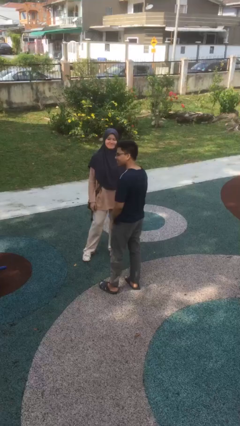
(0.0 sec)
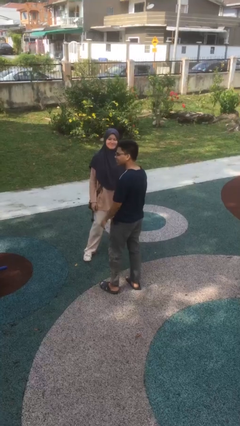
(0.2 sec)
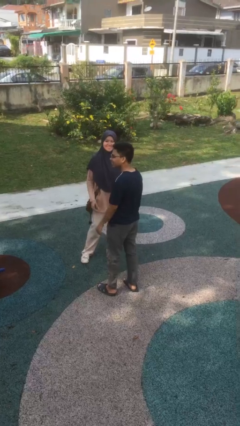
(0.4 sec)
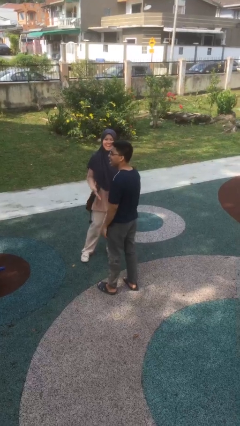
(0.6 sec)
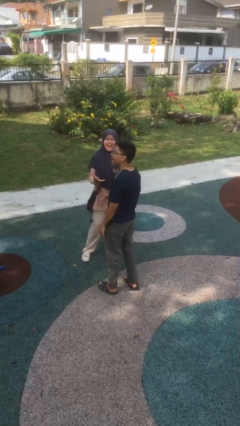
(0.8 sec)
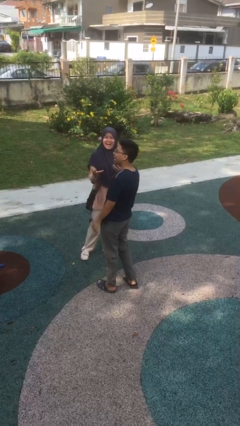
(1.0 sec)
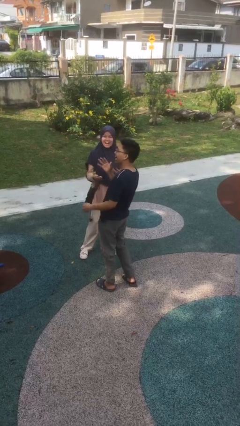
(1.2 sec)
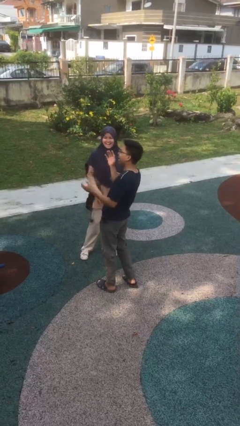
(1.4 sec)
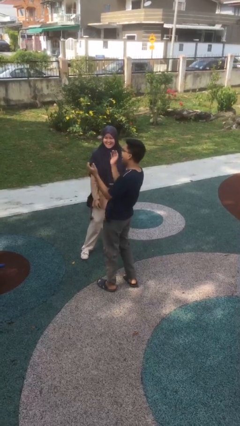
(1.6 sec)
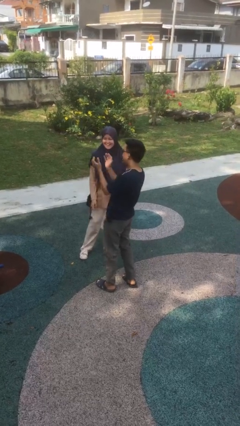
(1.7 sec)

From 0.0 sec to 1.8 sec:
person laughs with person

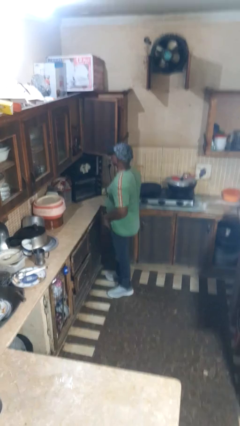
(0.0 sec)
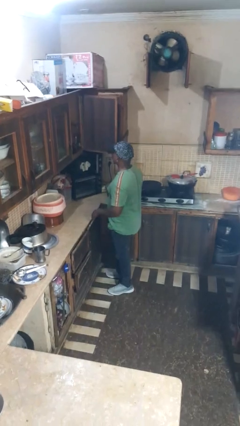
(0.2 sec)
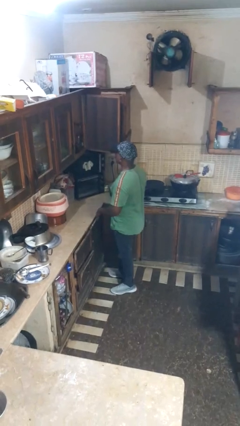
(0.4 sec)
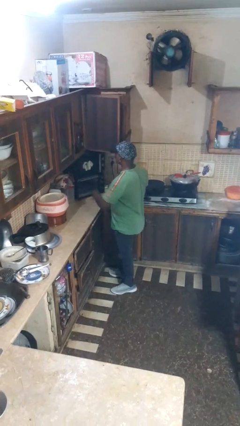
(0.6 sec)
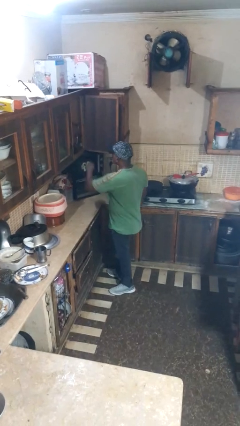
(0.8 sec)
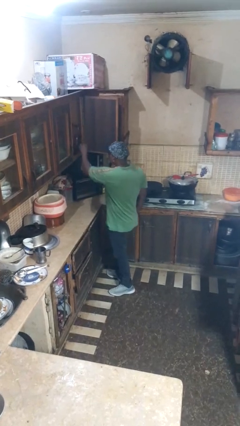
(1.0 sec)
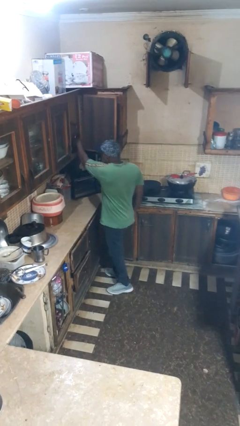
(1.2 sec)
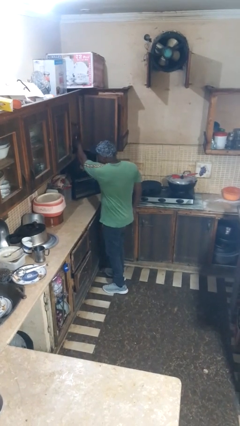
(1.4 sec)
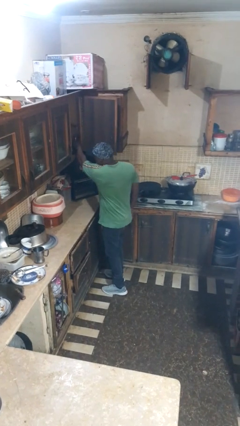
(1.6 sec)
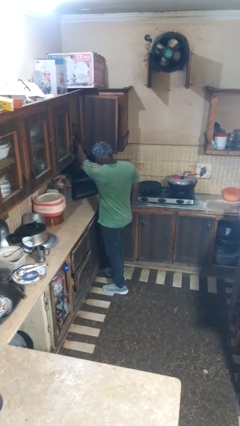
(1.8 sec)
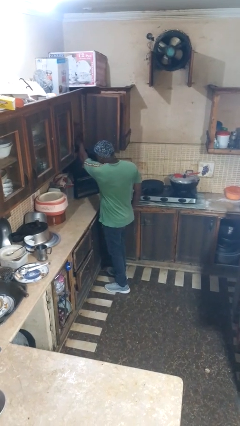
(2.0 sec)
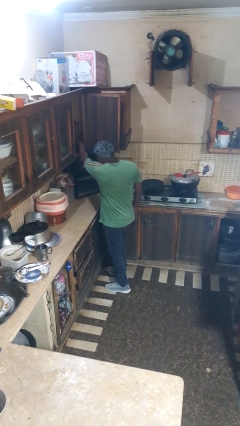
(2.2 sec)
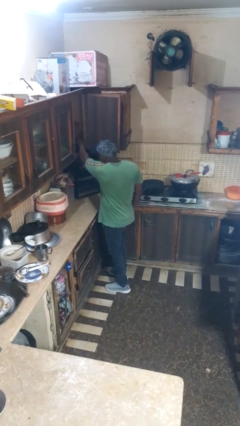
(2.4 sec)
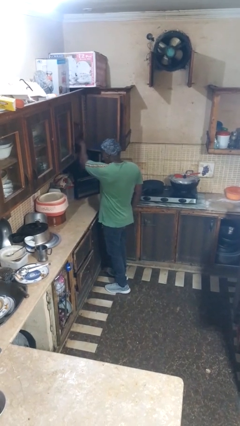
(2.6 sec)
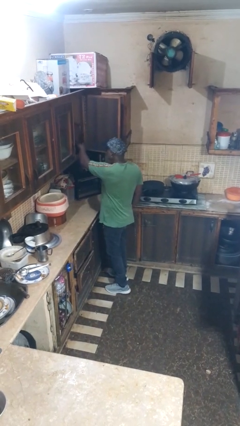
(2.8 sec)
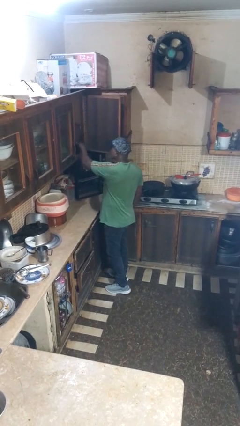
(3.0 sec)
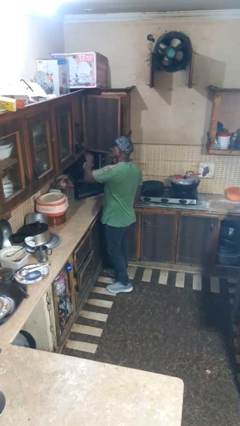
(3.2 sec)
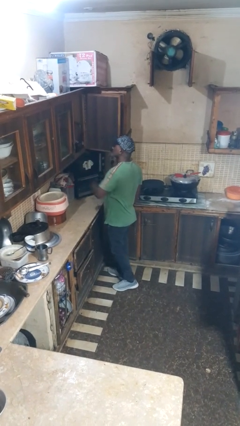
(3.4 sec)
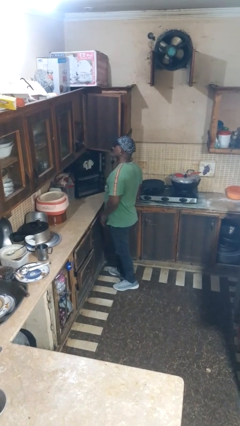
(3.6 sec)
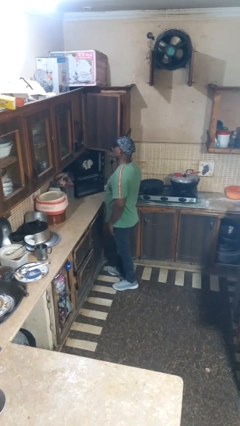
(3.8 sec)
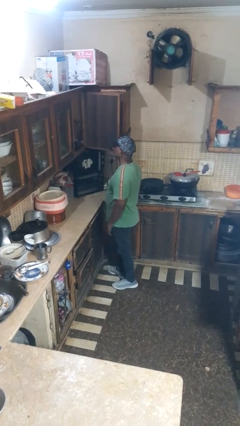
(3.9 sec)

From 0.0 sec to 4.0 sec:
person searches in cabinet

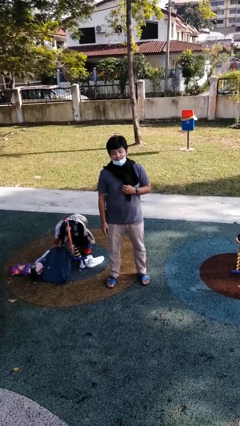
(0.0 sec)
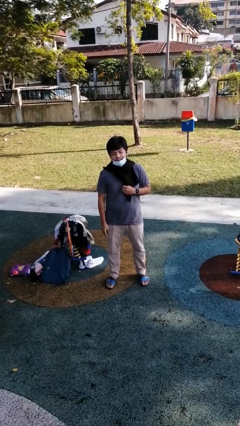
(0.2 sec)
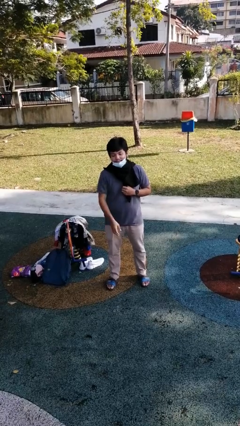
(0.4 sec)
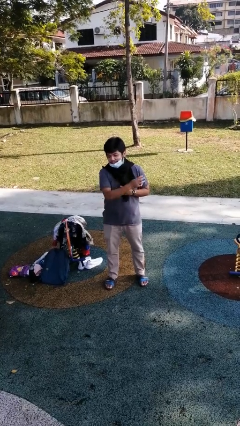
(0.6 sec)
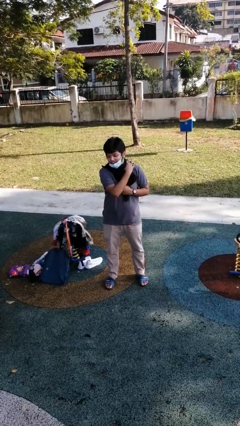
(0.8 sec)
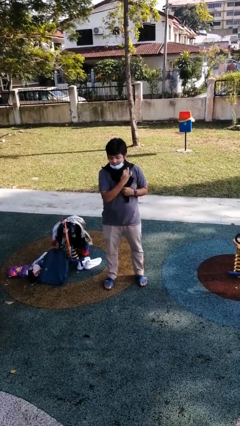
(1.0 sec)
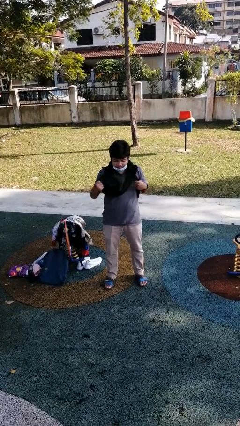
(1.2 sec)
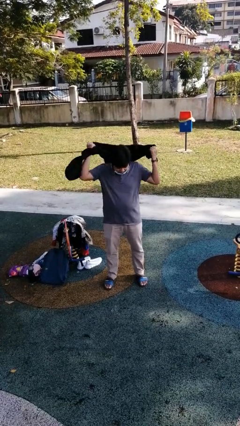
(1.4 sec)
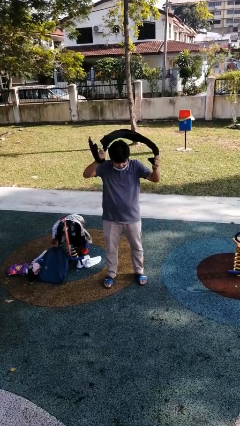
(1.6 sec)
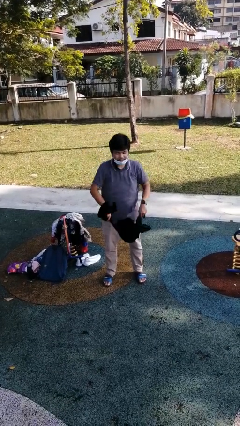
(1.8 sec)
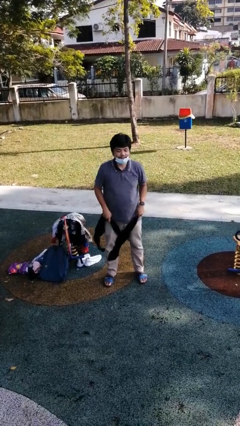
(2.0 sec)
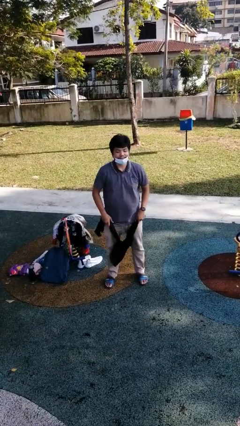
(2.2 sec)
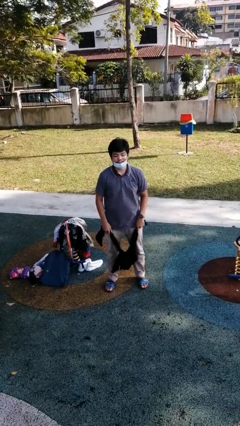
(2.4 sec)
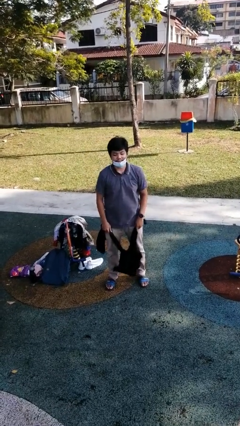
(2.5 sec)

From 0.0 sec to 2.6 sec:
person takes off scarf

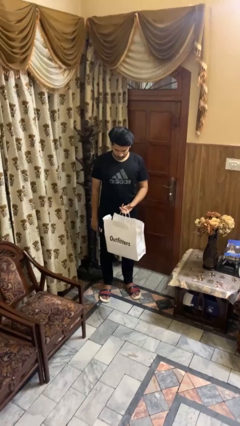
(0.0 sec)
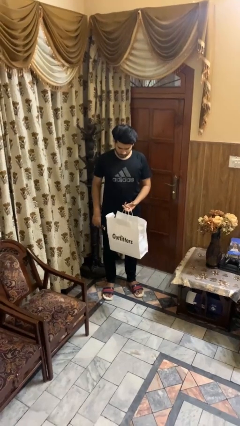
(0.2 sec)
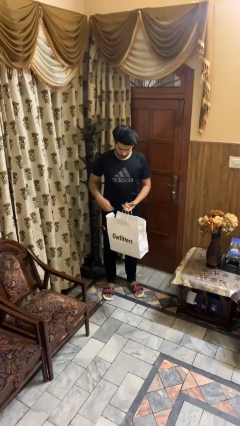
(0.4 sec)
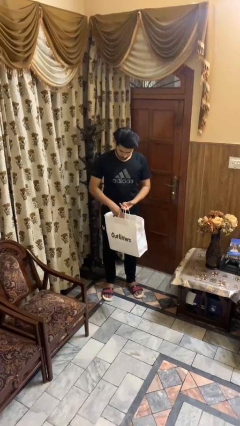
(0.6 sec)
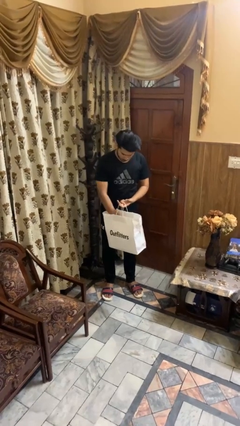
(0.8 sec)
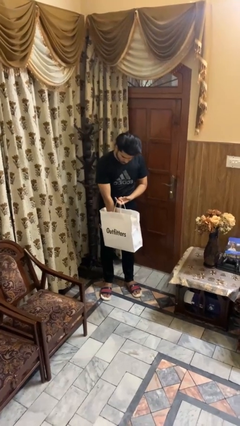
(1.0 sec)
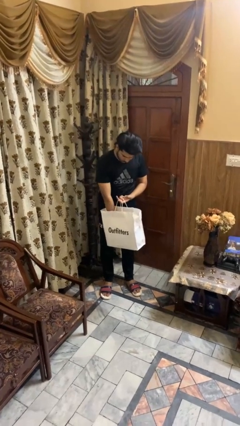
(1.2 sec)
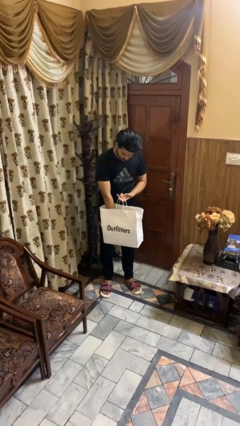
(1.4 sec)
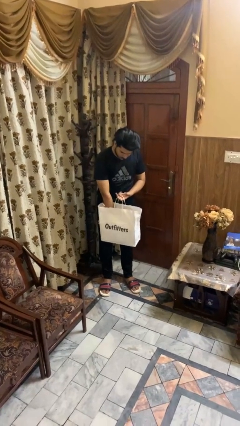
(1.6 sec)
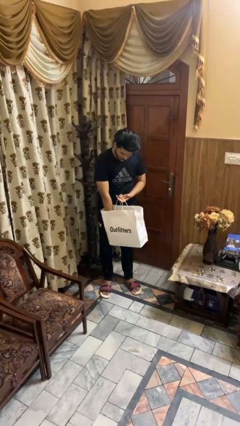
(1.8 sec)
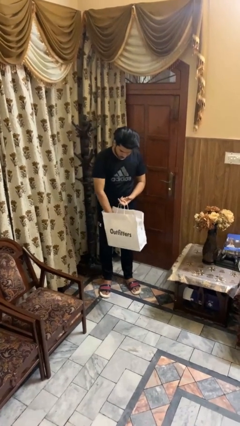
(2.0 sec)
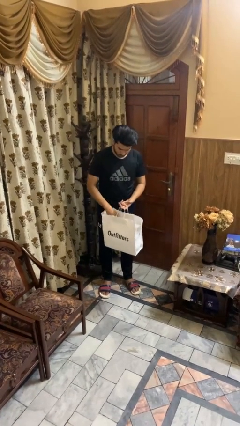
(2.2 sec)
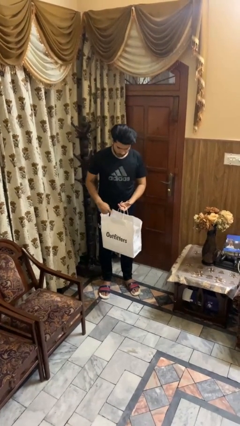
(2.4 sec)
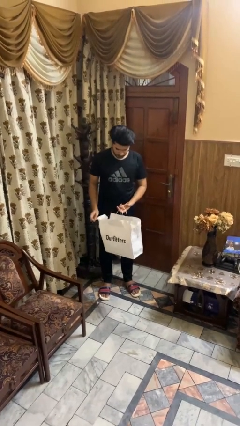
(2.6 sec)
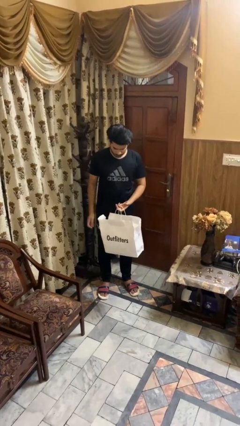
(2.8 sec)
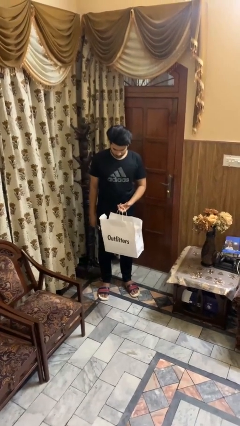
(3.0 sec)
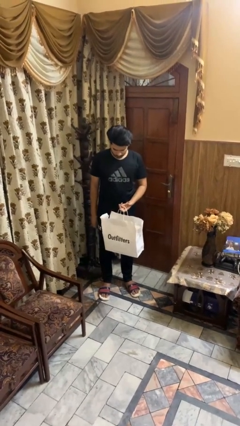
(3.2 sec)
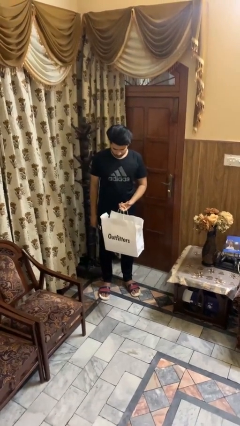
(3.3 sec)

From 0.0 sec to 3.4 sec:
person searches in bag

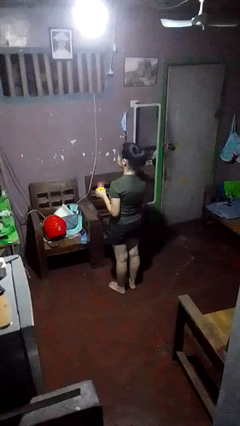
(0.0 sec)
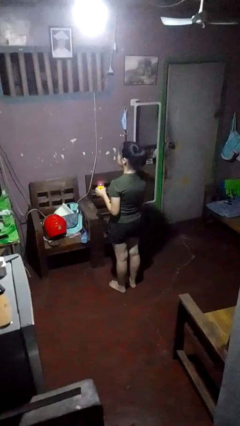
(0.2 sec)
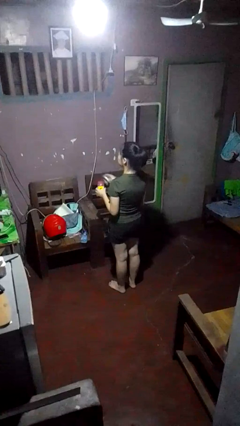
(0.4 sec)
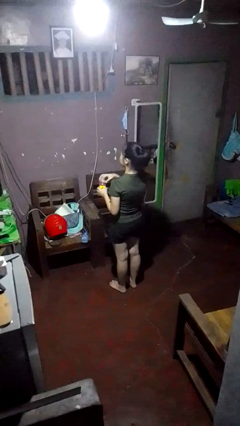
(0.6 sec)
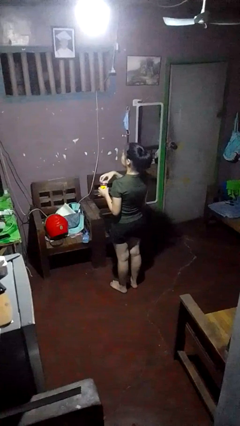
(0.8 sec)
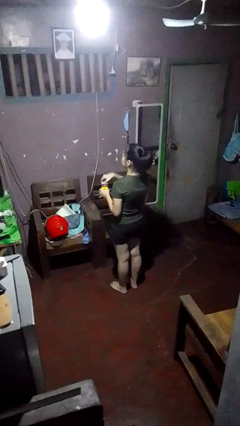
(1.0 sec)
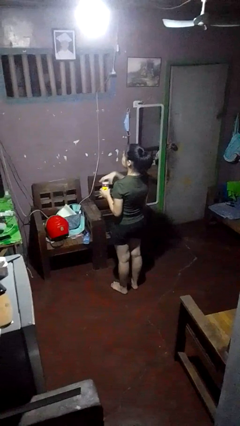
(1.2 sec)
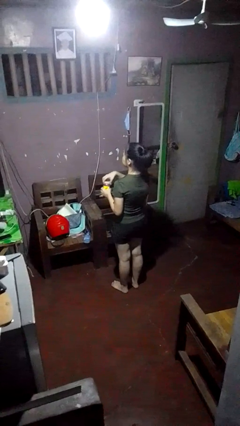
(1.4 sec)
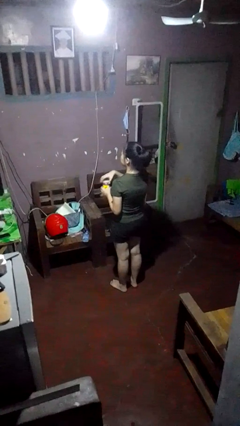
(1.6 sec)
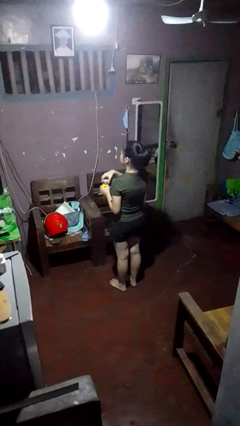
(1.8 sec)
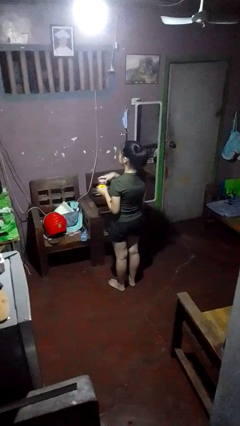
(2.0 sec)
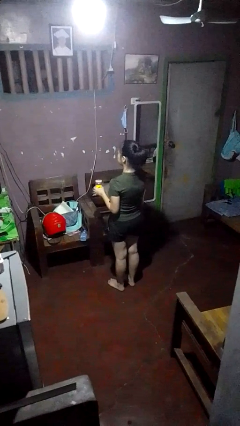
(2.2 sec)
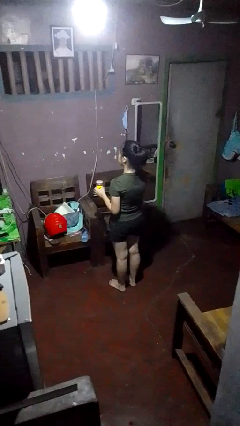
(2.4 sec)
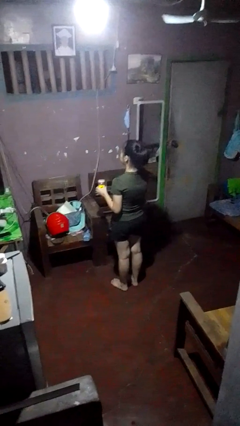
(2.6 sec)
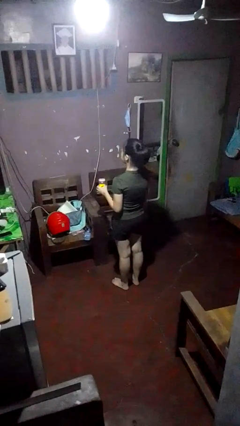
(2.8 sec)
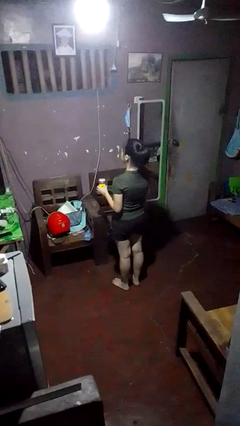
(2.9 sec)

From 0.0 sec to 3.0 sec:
person closes jar

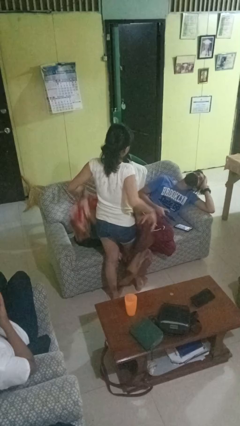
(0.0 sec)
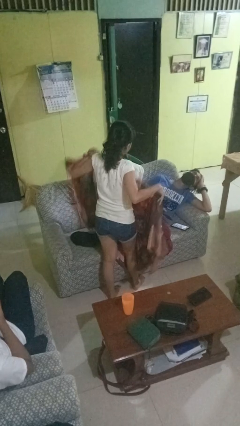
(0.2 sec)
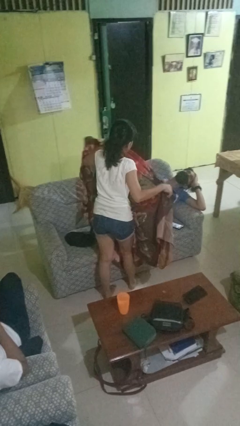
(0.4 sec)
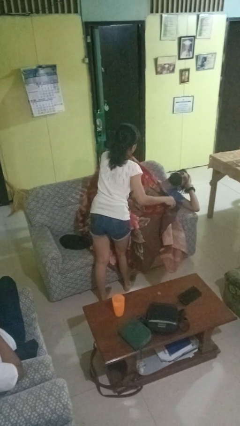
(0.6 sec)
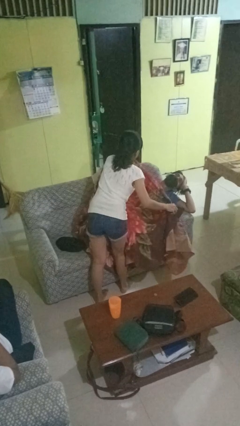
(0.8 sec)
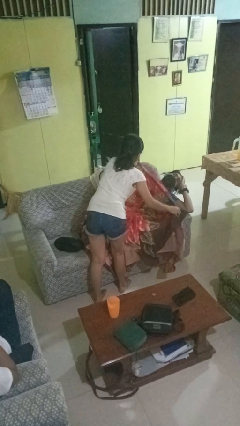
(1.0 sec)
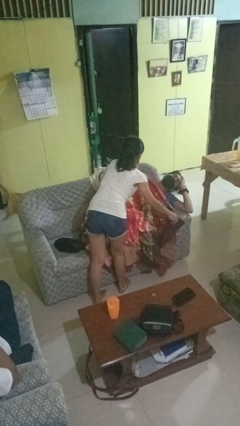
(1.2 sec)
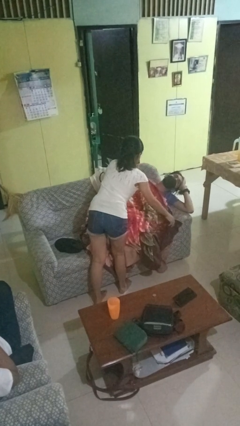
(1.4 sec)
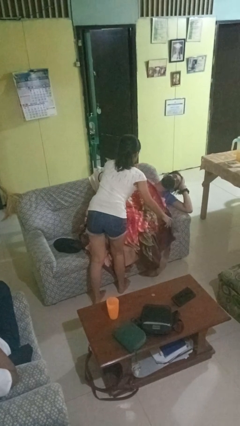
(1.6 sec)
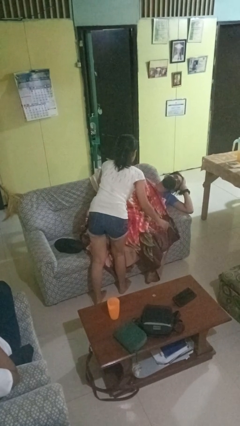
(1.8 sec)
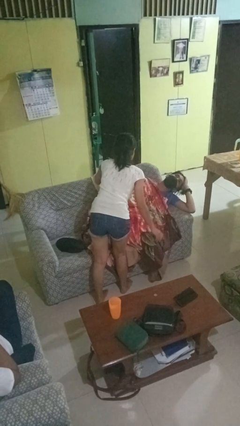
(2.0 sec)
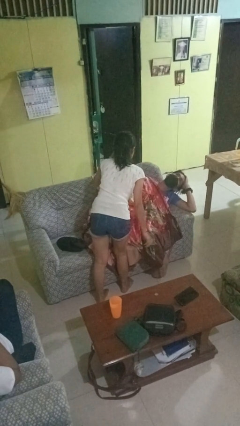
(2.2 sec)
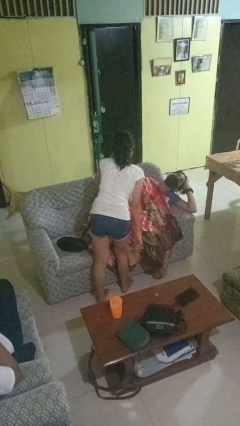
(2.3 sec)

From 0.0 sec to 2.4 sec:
person covers friend with blanket
